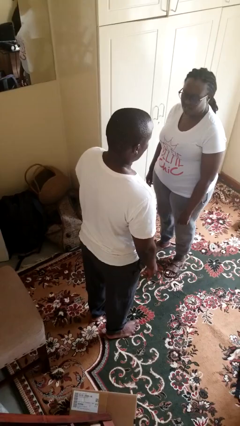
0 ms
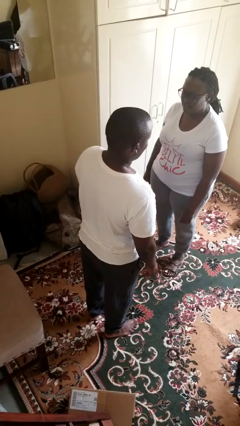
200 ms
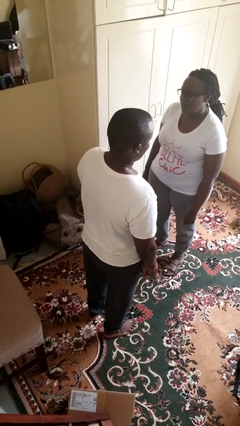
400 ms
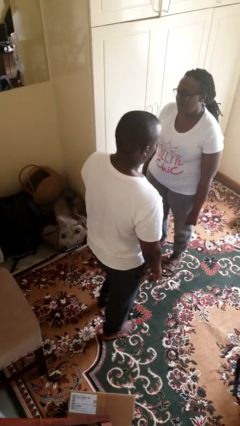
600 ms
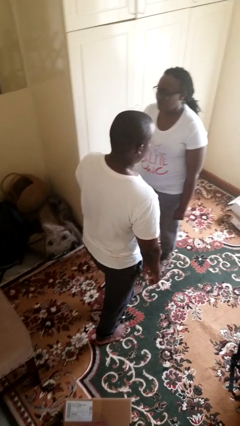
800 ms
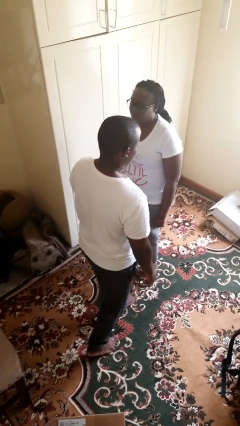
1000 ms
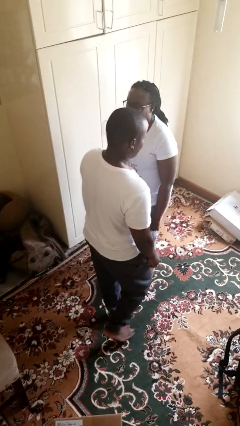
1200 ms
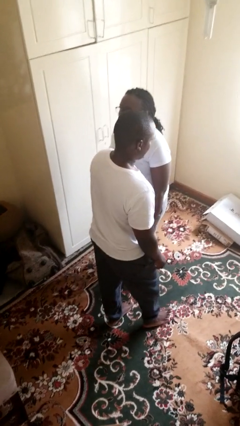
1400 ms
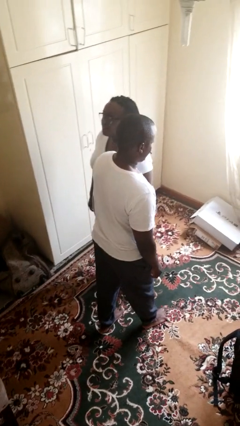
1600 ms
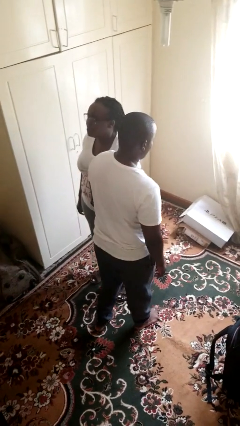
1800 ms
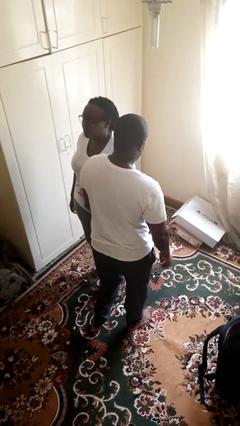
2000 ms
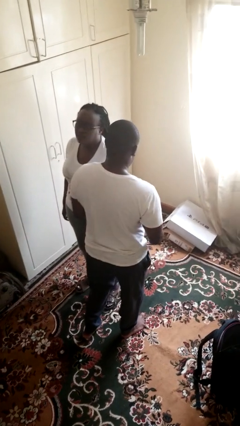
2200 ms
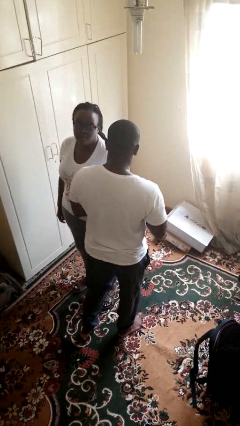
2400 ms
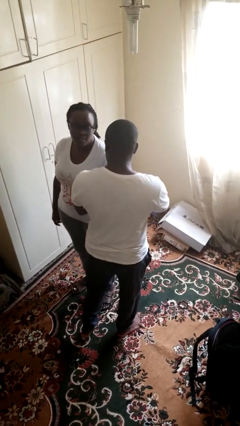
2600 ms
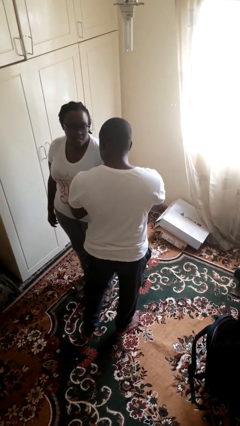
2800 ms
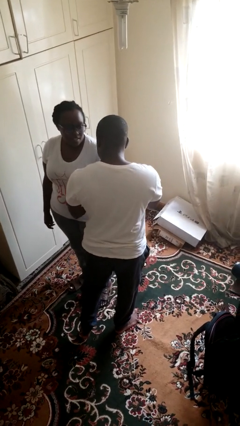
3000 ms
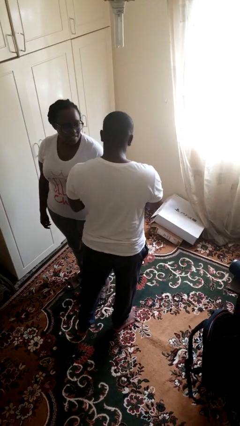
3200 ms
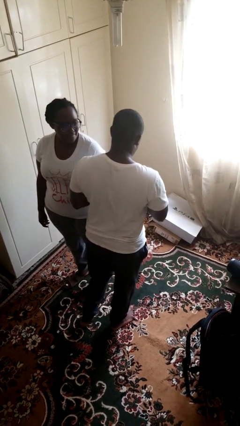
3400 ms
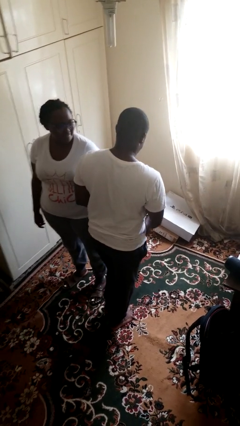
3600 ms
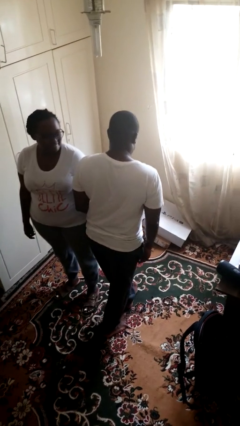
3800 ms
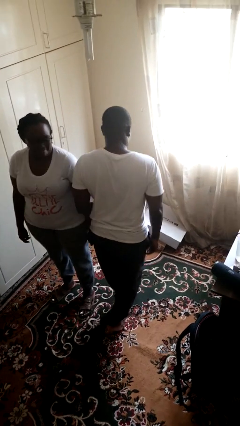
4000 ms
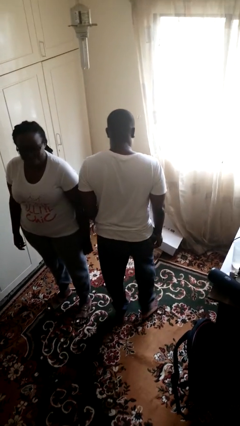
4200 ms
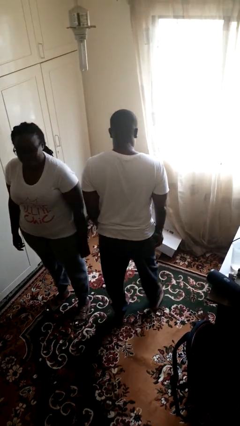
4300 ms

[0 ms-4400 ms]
person bumps into person

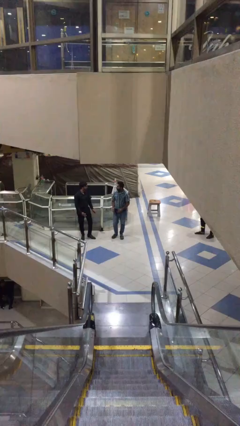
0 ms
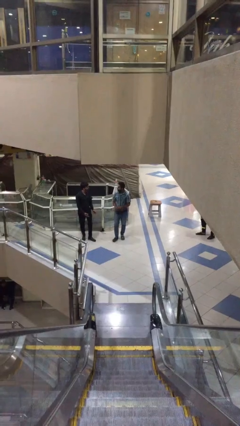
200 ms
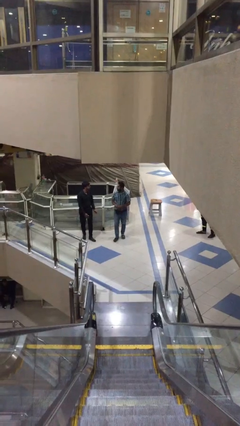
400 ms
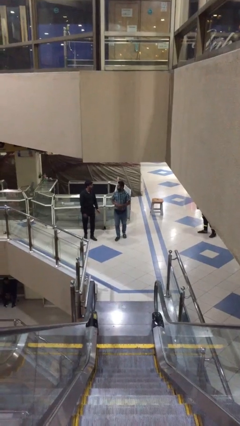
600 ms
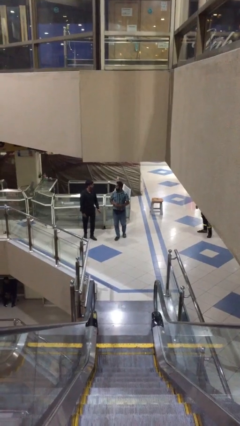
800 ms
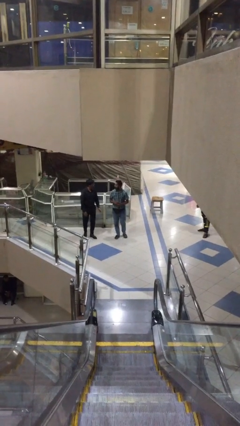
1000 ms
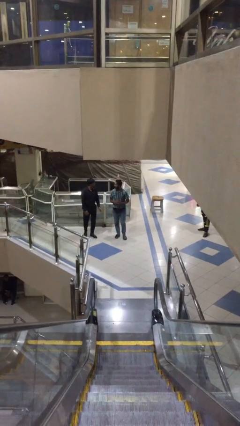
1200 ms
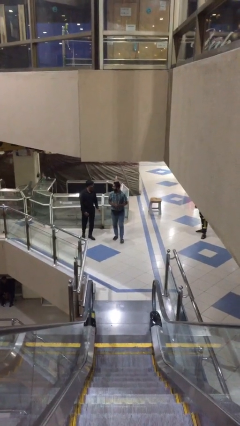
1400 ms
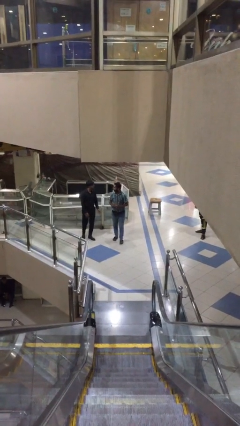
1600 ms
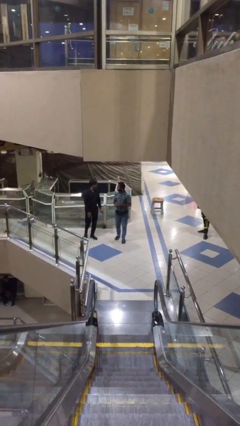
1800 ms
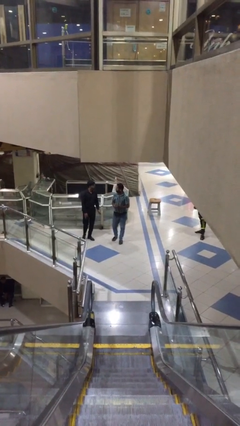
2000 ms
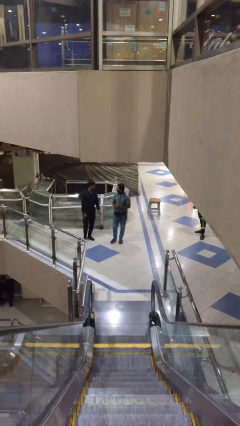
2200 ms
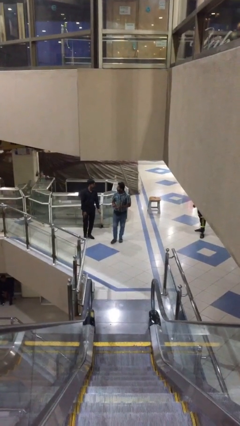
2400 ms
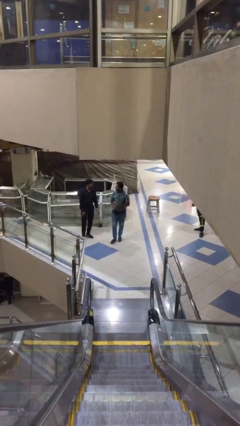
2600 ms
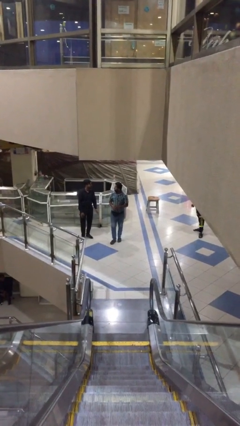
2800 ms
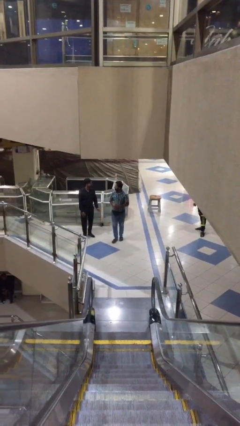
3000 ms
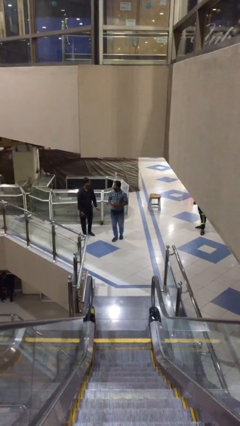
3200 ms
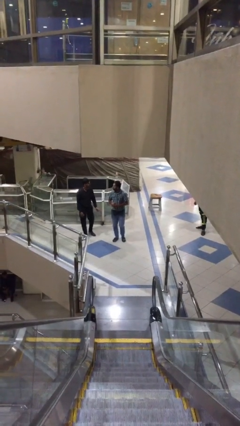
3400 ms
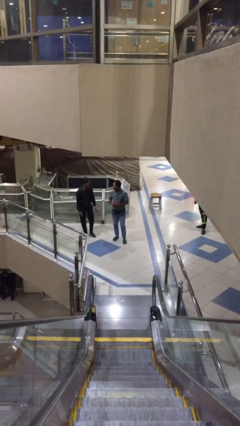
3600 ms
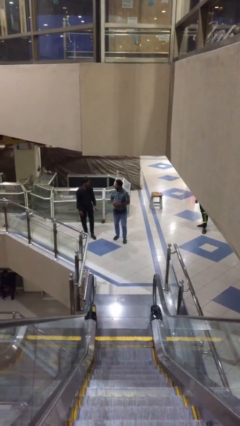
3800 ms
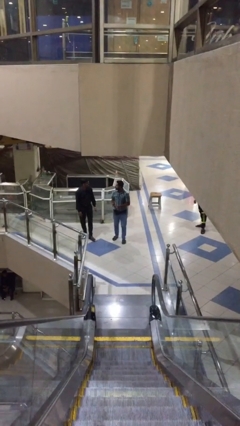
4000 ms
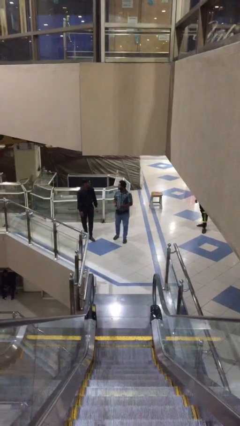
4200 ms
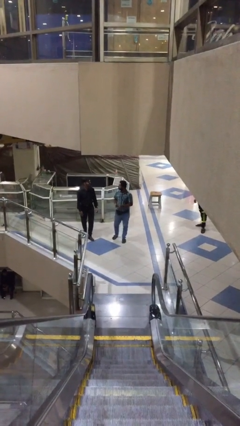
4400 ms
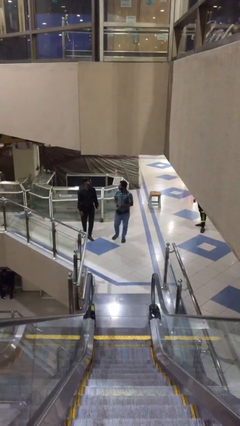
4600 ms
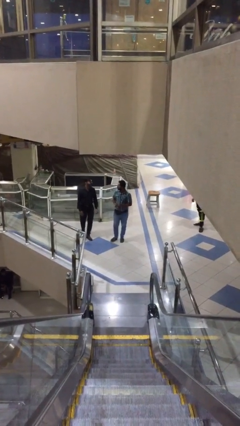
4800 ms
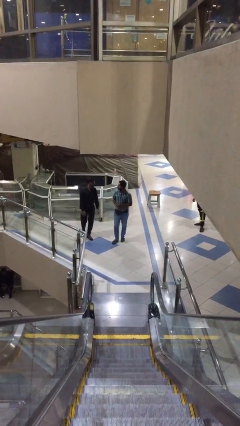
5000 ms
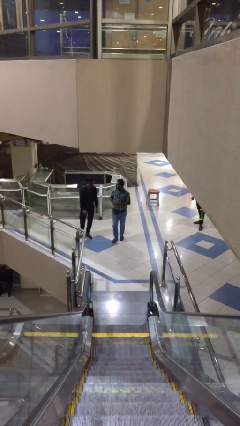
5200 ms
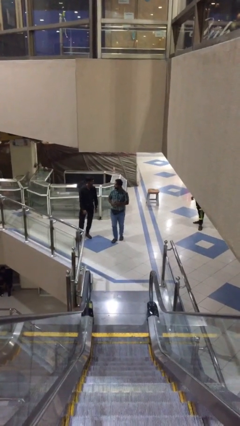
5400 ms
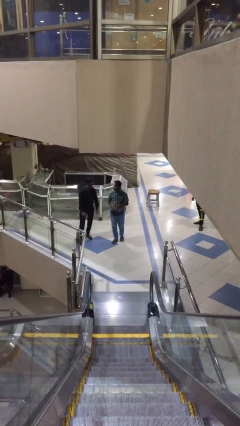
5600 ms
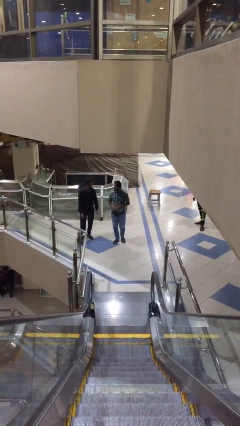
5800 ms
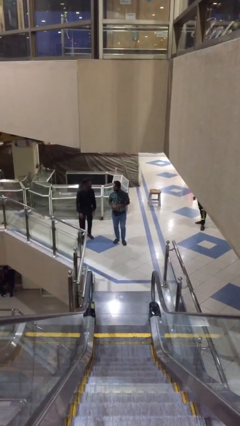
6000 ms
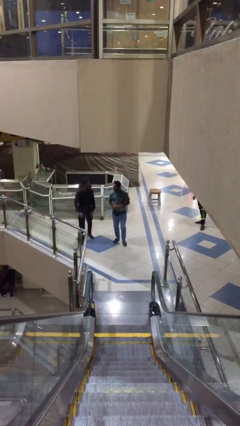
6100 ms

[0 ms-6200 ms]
person talks to person

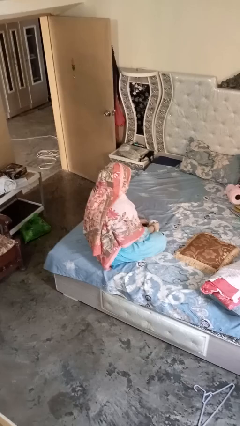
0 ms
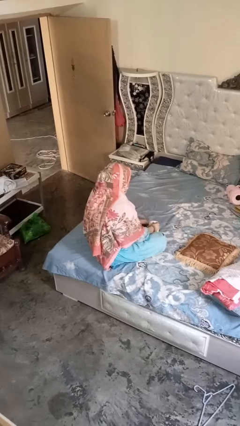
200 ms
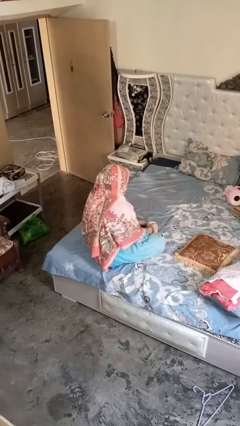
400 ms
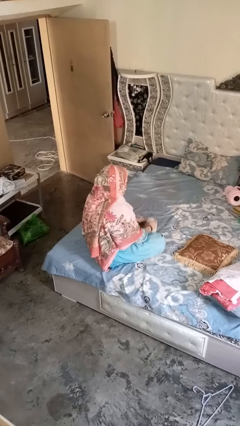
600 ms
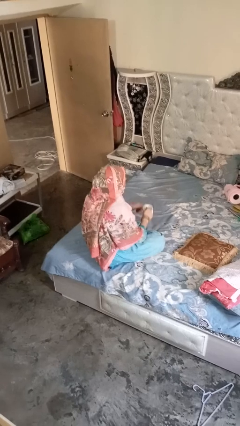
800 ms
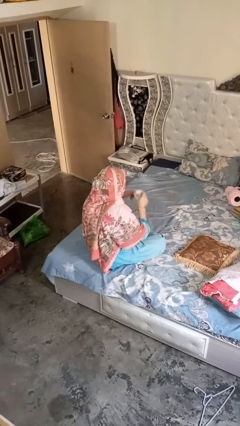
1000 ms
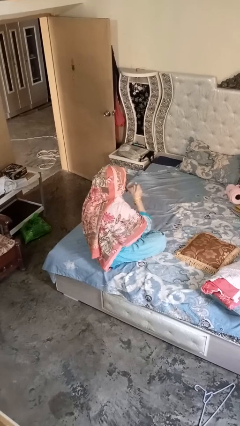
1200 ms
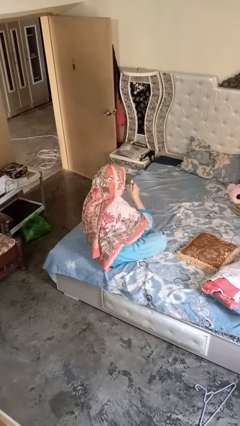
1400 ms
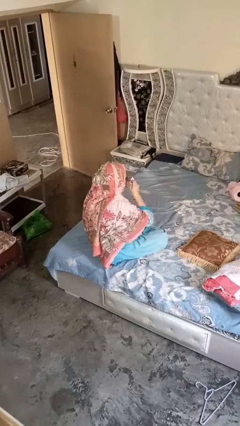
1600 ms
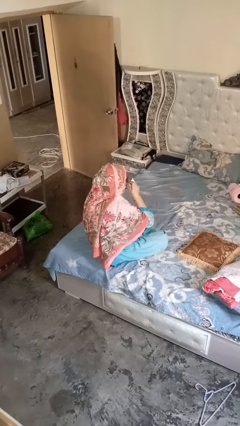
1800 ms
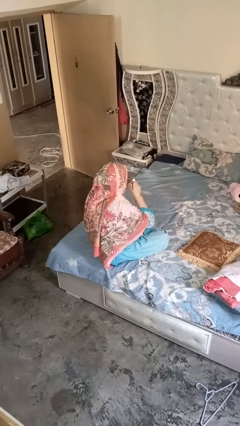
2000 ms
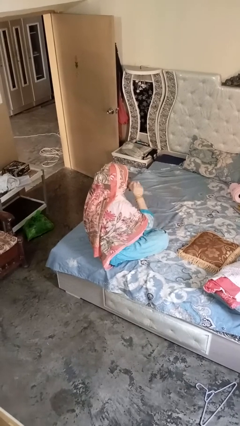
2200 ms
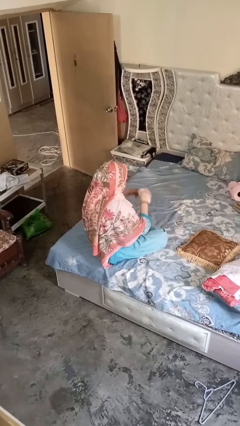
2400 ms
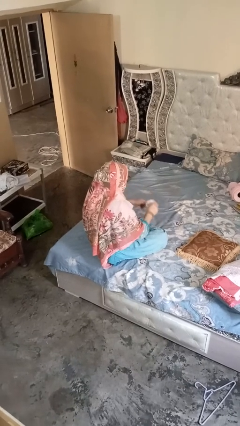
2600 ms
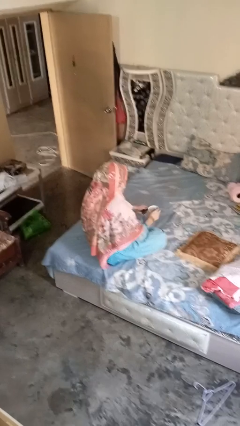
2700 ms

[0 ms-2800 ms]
person drinks from mug

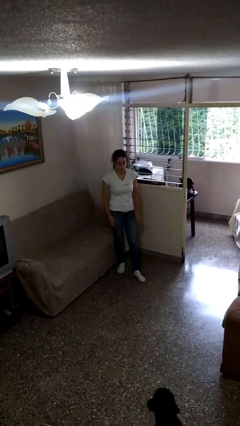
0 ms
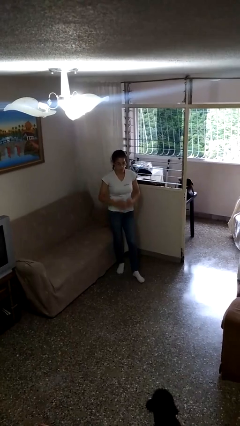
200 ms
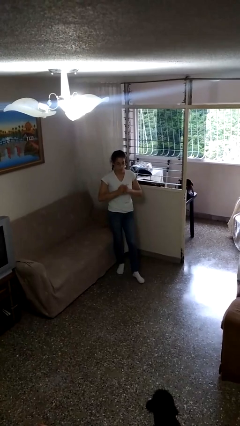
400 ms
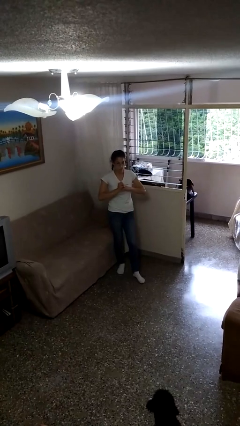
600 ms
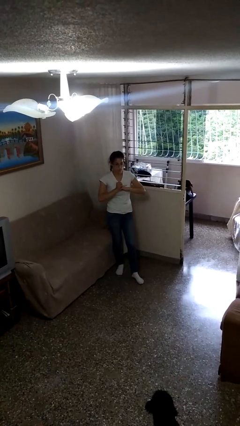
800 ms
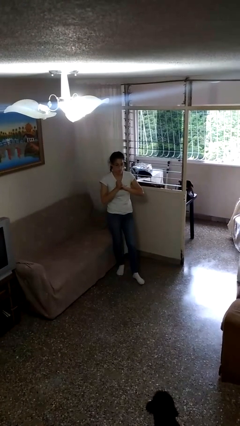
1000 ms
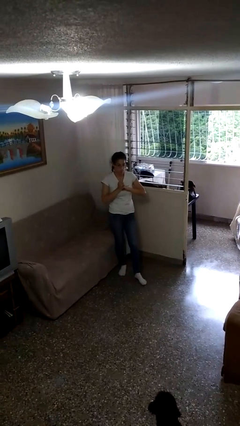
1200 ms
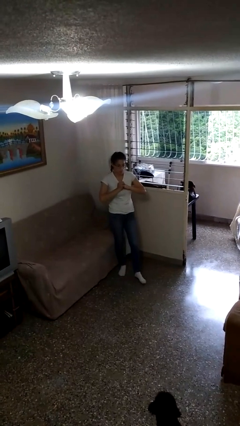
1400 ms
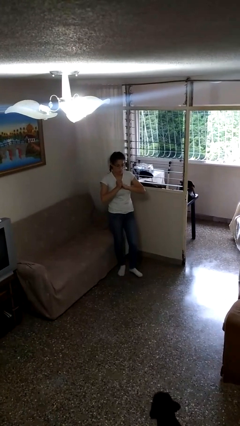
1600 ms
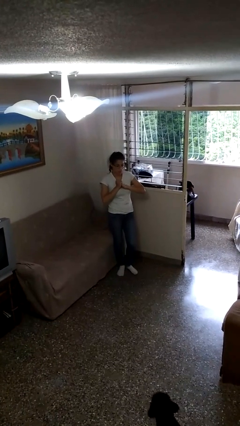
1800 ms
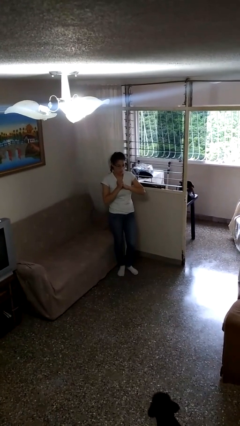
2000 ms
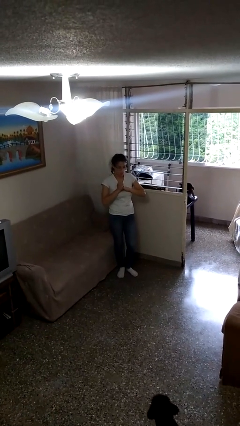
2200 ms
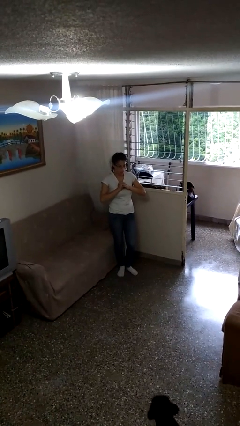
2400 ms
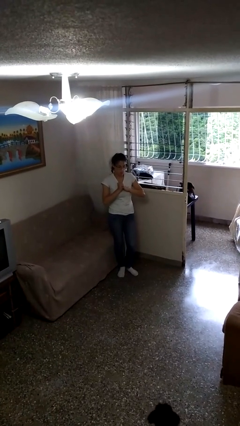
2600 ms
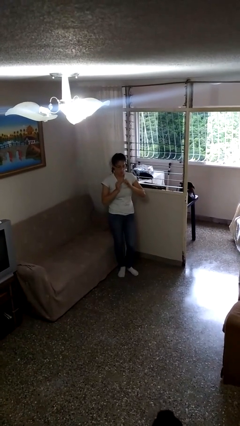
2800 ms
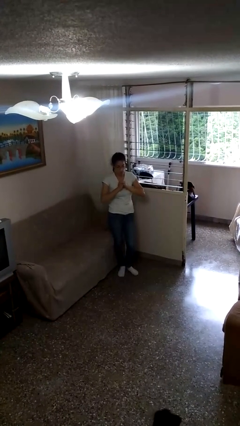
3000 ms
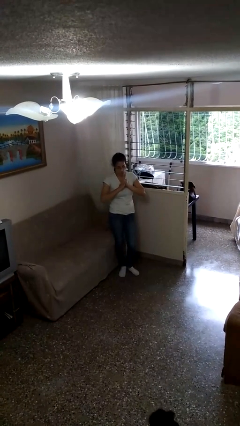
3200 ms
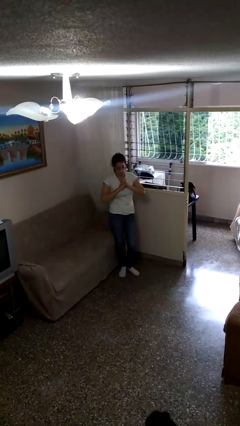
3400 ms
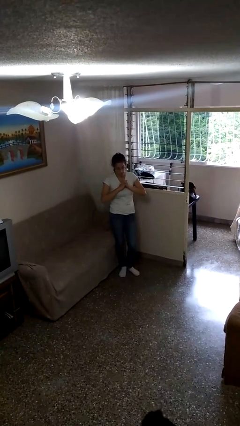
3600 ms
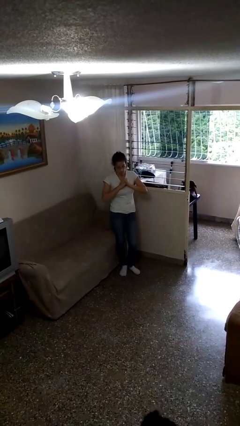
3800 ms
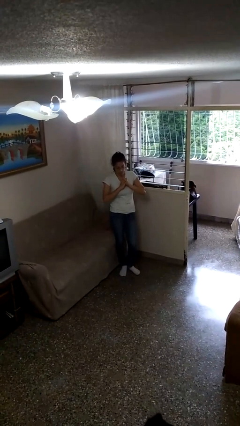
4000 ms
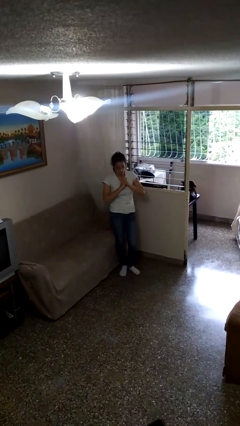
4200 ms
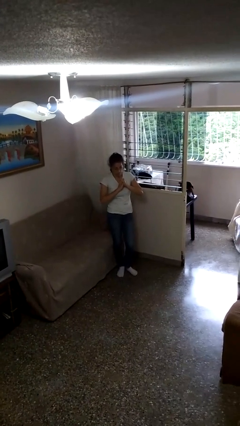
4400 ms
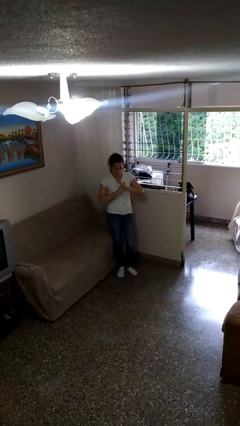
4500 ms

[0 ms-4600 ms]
person cracks knuckles
